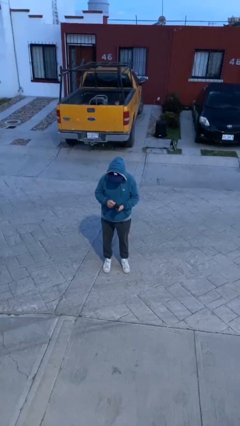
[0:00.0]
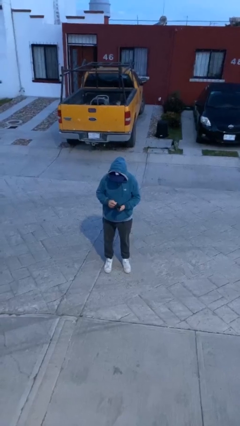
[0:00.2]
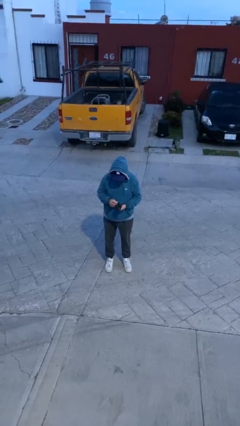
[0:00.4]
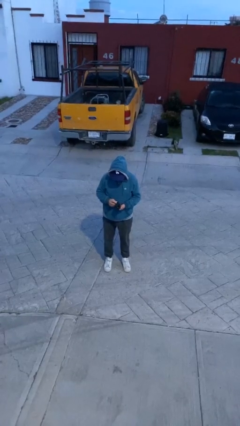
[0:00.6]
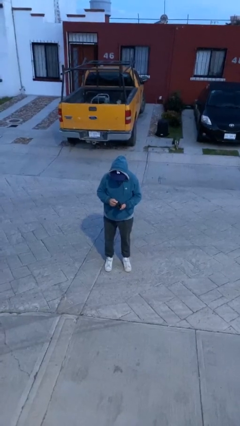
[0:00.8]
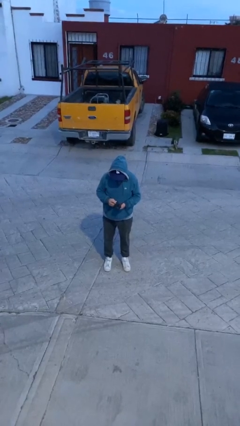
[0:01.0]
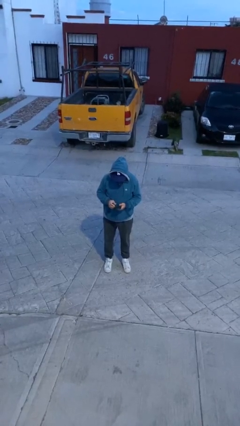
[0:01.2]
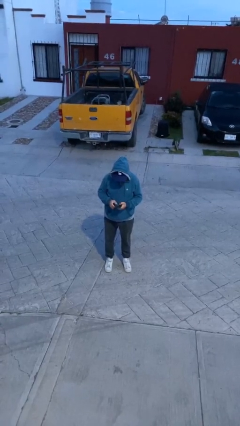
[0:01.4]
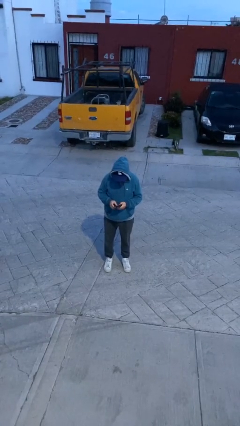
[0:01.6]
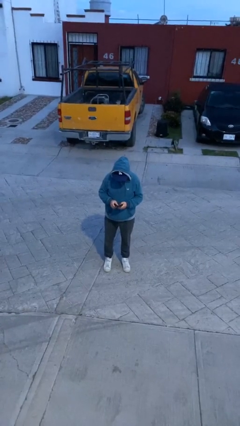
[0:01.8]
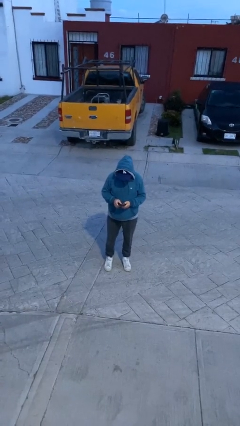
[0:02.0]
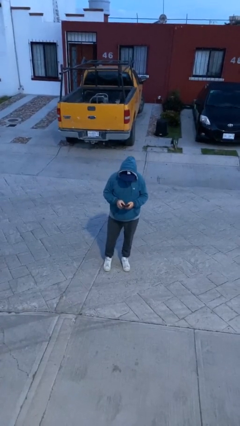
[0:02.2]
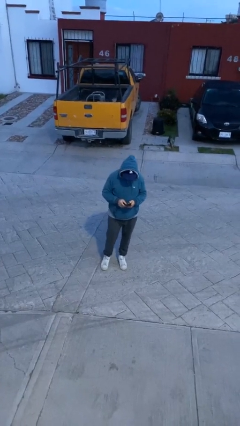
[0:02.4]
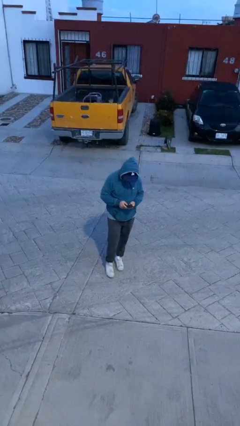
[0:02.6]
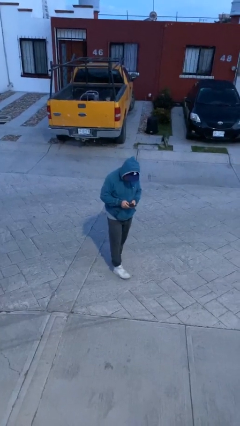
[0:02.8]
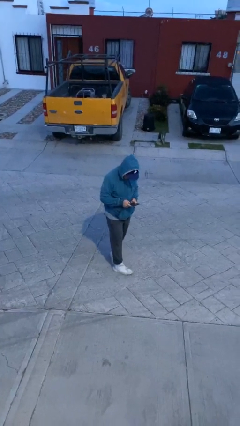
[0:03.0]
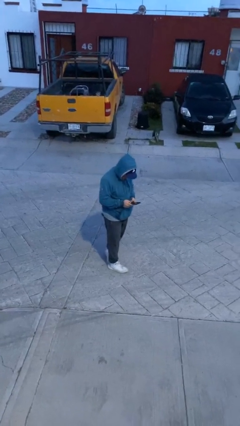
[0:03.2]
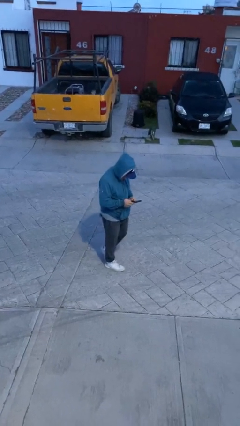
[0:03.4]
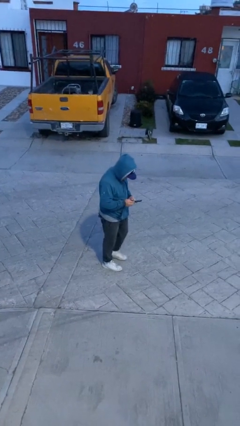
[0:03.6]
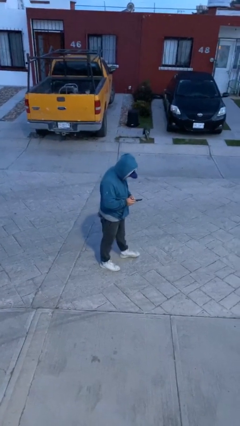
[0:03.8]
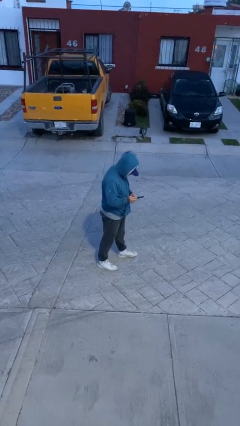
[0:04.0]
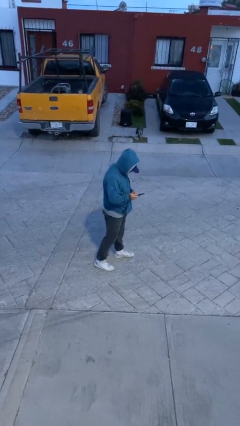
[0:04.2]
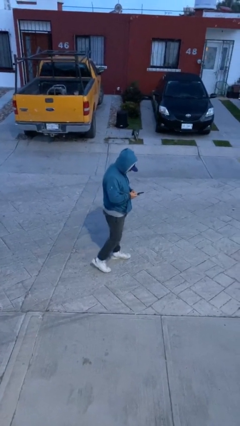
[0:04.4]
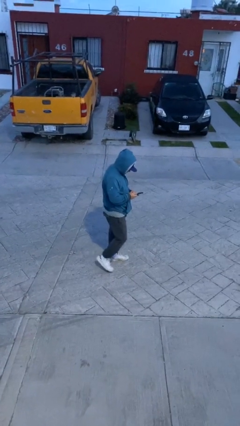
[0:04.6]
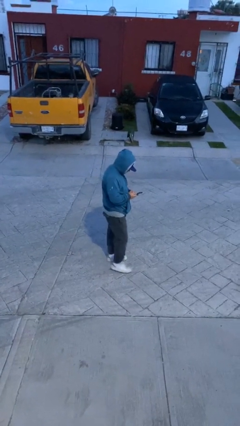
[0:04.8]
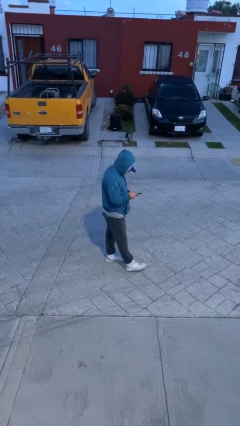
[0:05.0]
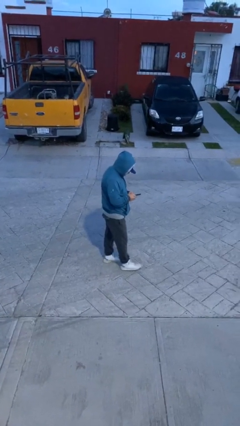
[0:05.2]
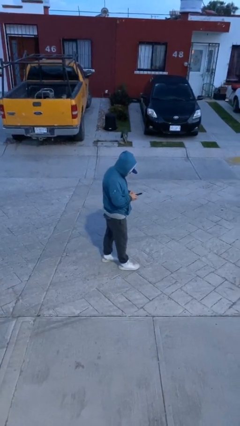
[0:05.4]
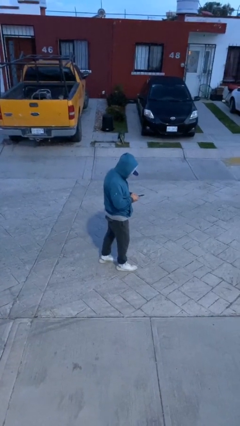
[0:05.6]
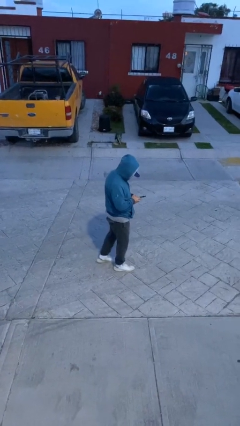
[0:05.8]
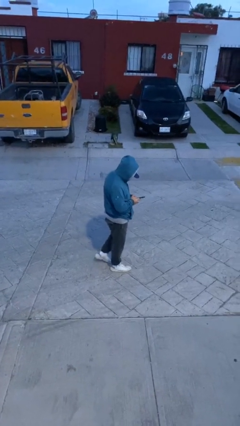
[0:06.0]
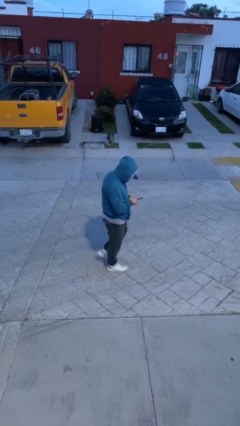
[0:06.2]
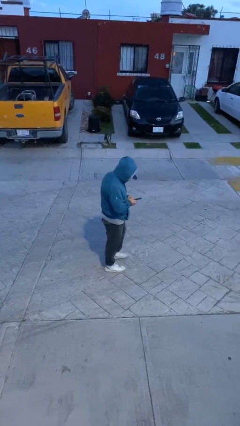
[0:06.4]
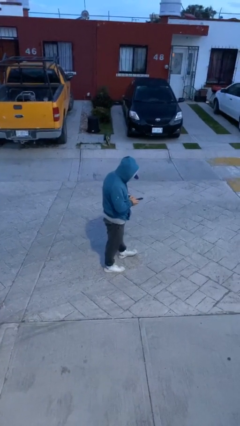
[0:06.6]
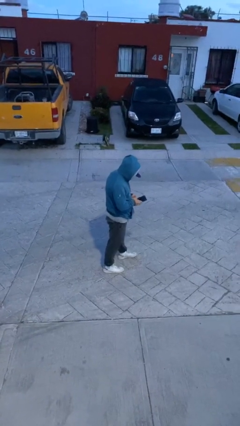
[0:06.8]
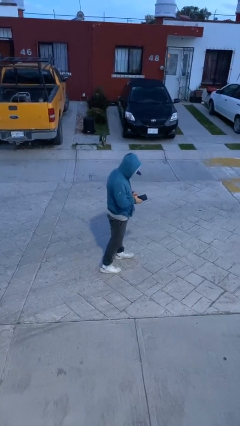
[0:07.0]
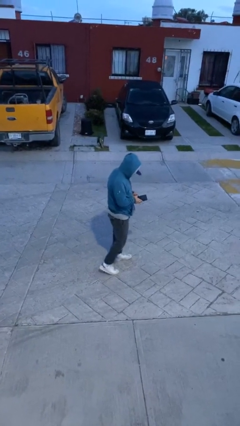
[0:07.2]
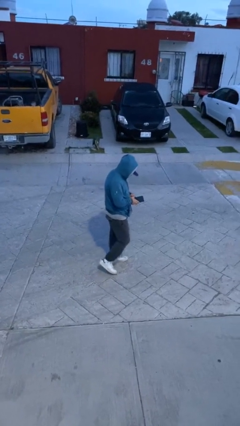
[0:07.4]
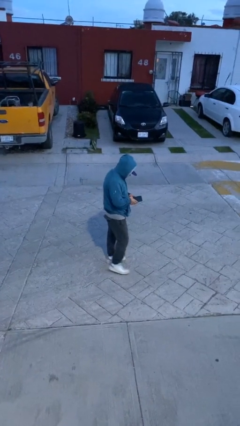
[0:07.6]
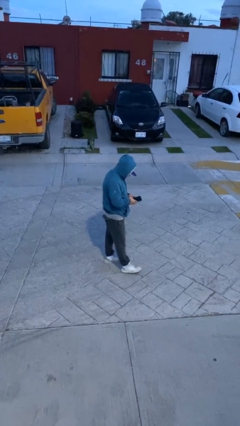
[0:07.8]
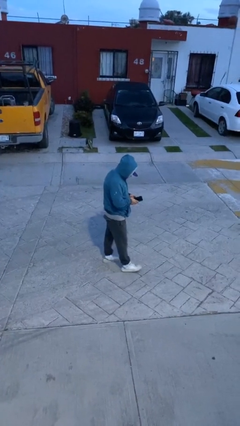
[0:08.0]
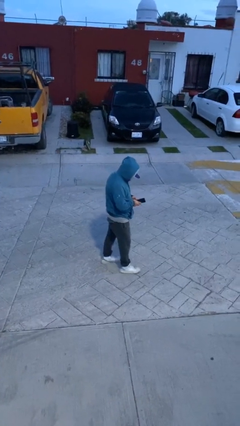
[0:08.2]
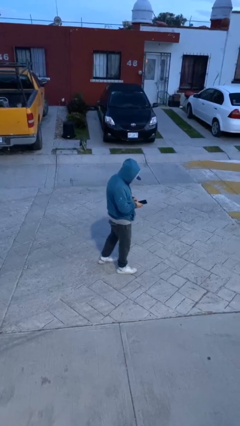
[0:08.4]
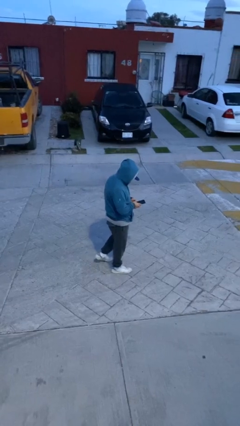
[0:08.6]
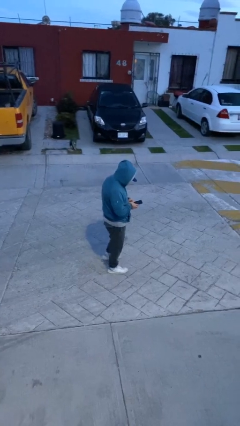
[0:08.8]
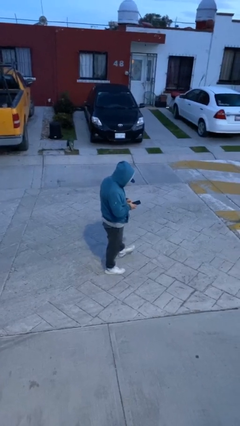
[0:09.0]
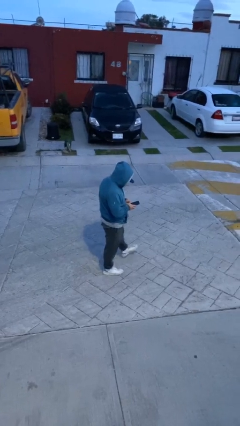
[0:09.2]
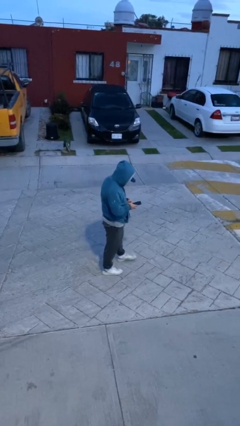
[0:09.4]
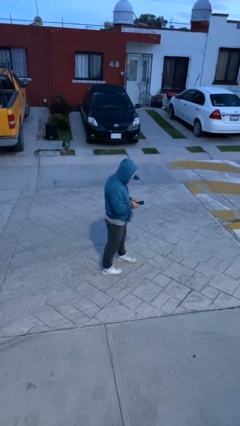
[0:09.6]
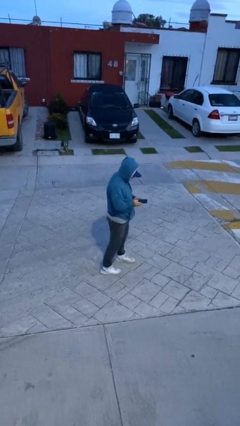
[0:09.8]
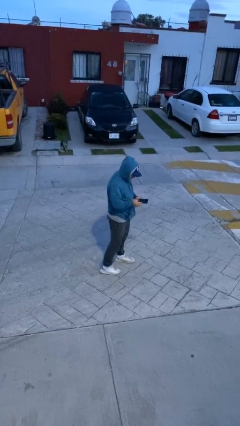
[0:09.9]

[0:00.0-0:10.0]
person texts on phone

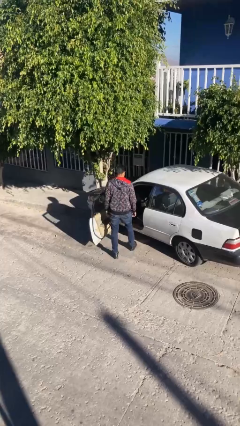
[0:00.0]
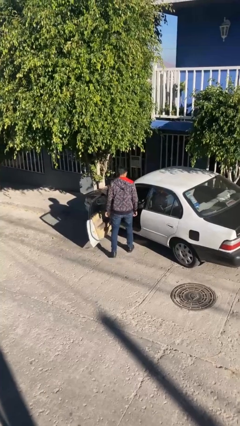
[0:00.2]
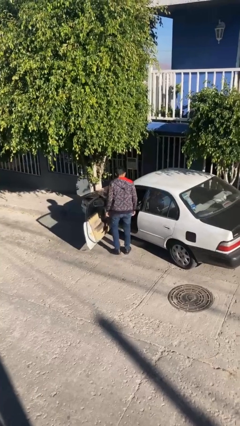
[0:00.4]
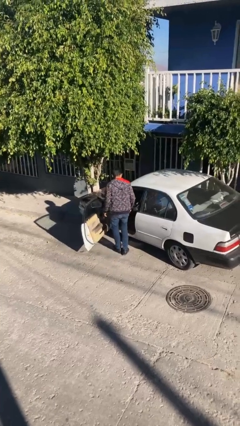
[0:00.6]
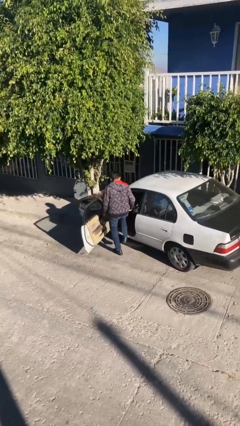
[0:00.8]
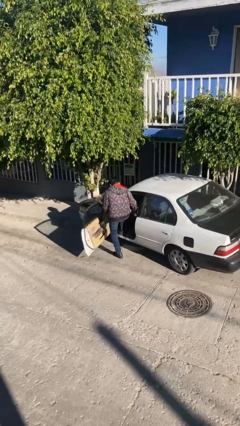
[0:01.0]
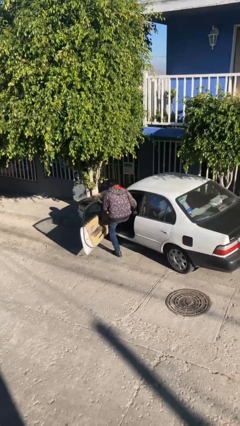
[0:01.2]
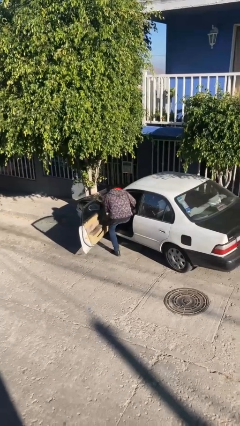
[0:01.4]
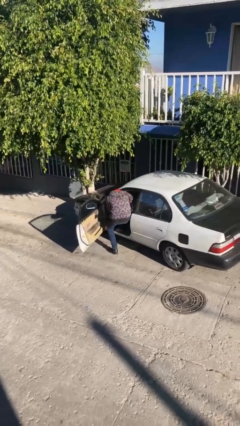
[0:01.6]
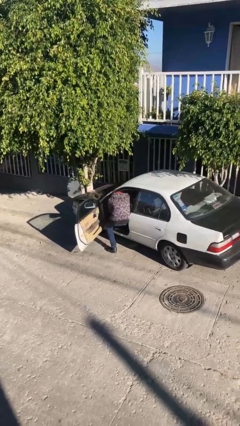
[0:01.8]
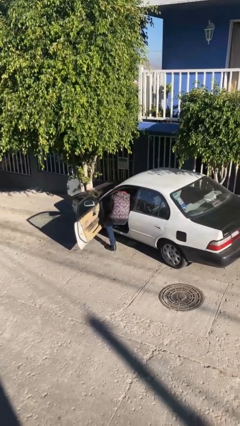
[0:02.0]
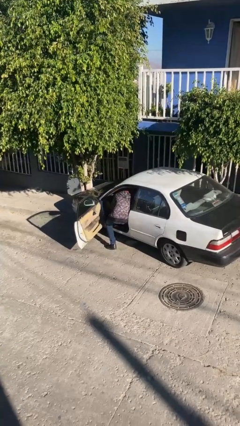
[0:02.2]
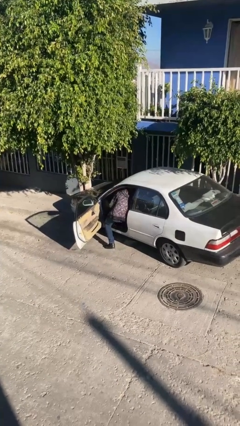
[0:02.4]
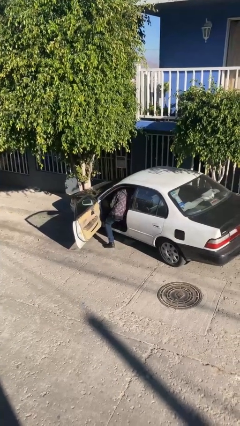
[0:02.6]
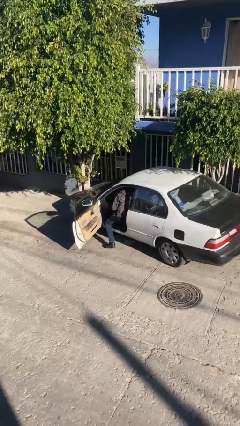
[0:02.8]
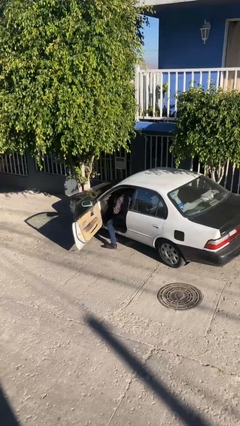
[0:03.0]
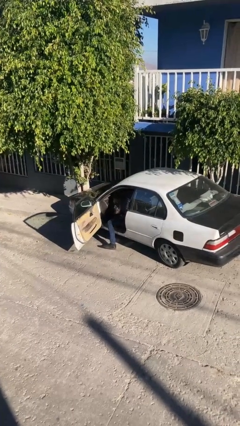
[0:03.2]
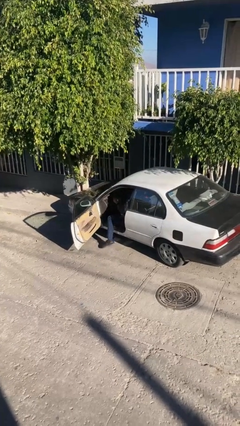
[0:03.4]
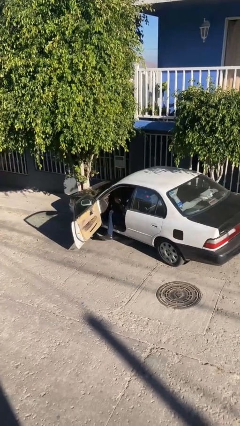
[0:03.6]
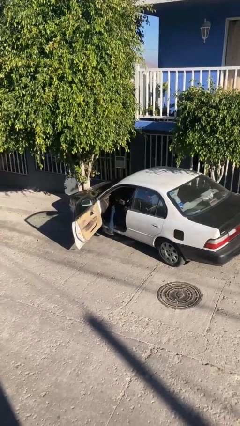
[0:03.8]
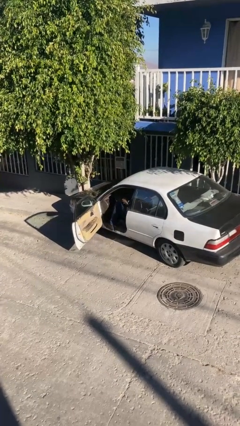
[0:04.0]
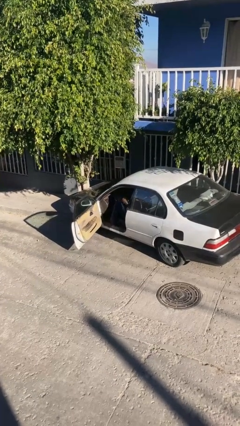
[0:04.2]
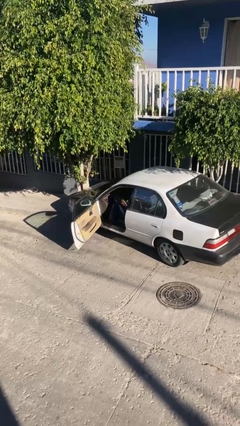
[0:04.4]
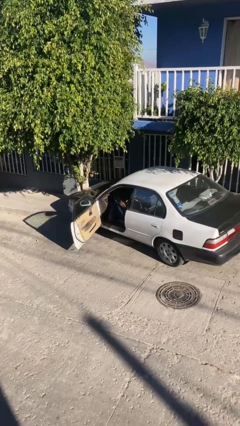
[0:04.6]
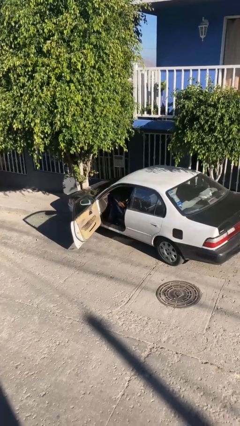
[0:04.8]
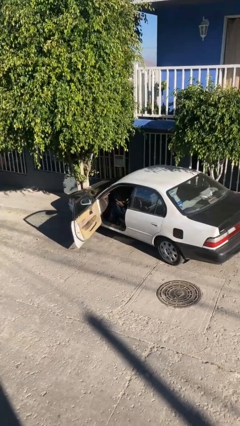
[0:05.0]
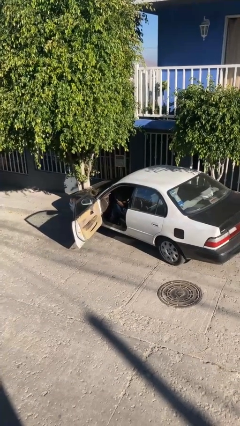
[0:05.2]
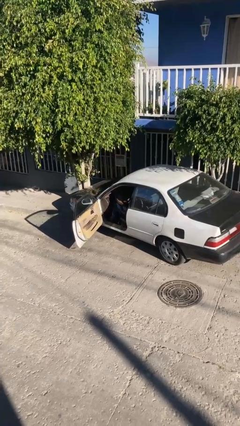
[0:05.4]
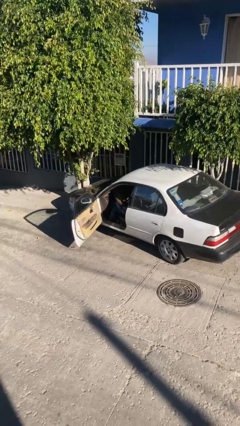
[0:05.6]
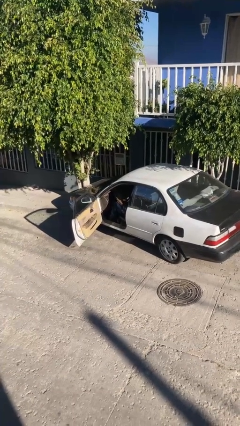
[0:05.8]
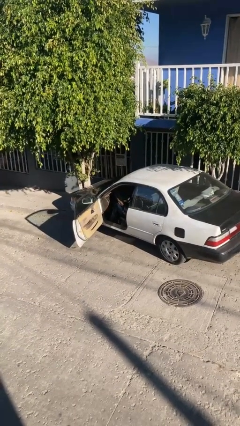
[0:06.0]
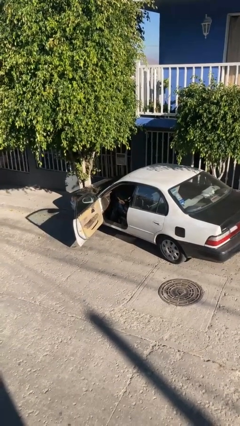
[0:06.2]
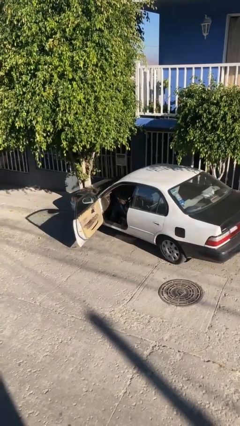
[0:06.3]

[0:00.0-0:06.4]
person enters car

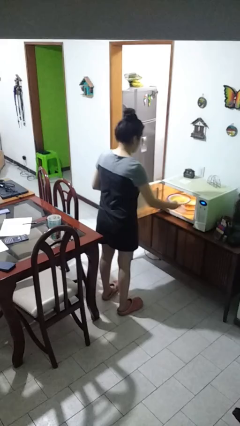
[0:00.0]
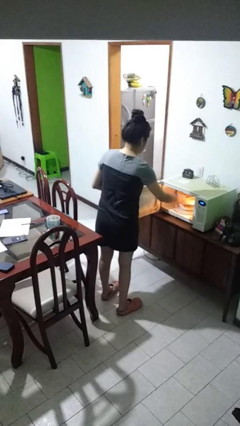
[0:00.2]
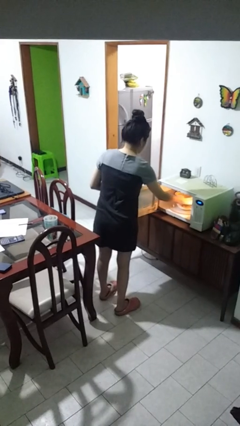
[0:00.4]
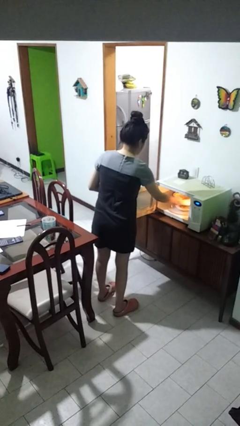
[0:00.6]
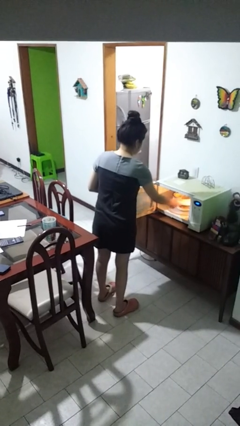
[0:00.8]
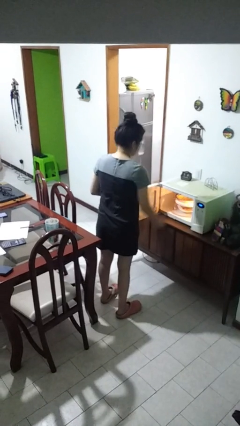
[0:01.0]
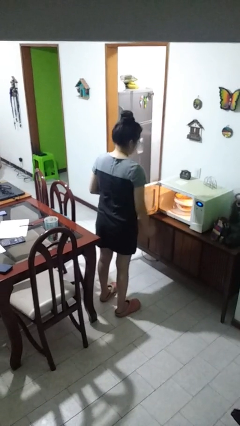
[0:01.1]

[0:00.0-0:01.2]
person puts object into microwave

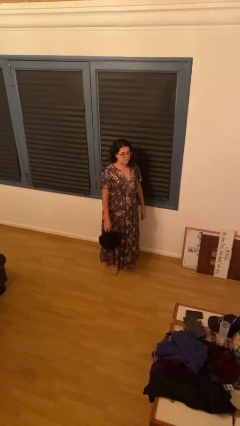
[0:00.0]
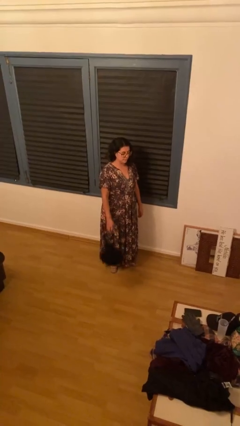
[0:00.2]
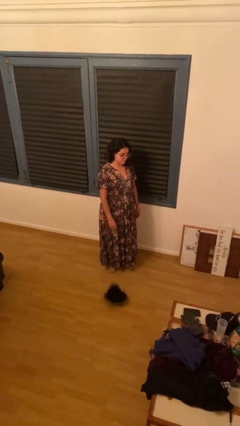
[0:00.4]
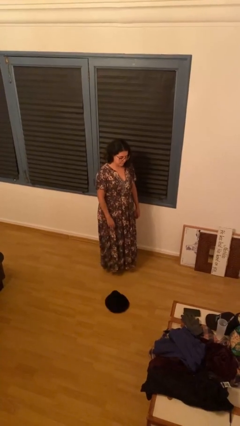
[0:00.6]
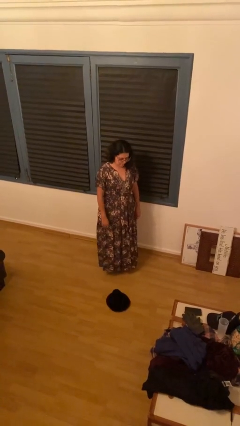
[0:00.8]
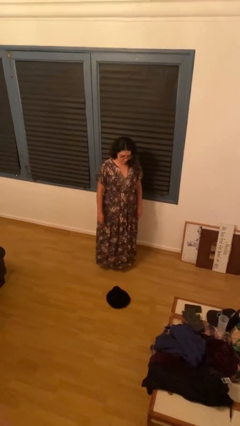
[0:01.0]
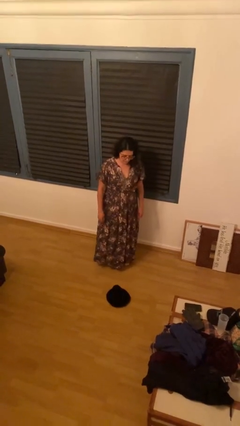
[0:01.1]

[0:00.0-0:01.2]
person drops object
